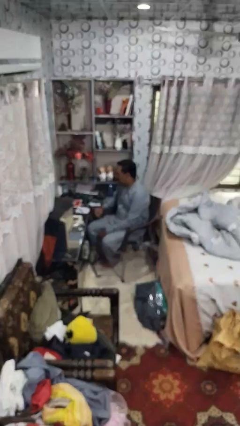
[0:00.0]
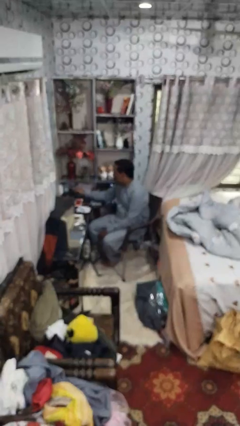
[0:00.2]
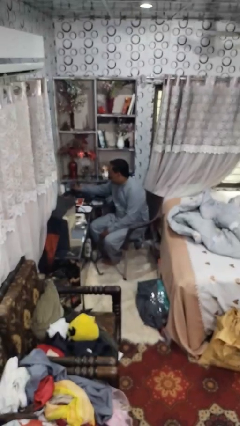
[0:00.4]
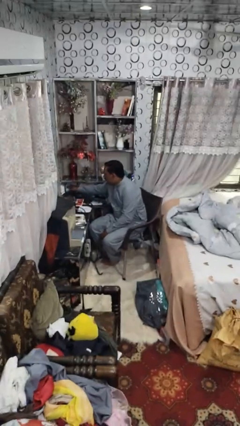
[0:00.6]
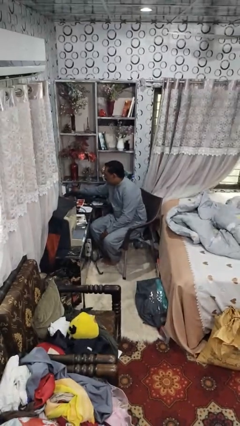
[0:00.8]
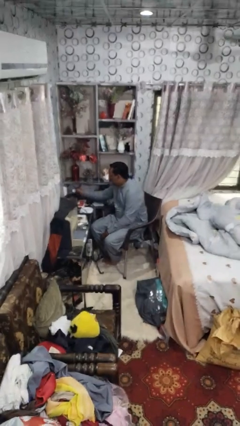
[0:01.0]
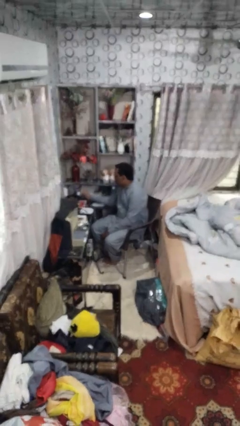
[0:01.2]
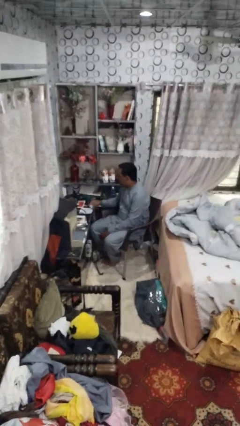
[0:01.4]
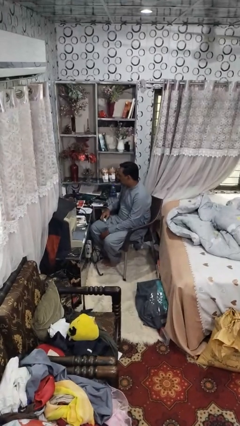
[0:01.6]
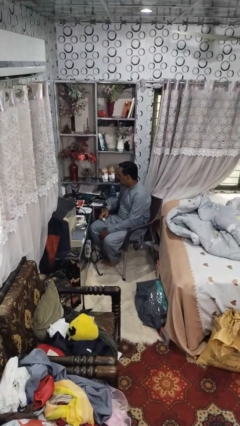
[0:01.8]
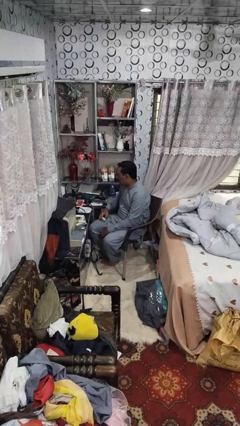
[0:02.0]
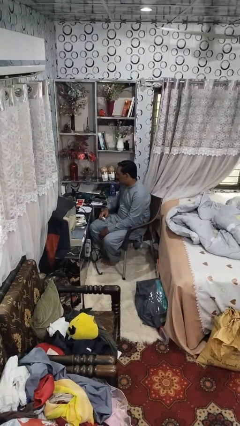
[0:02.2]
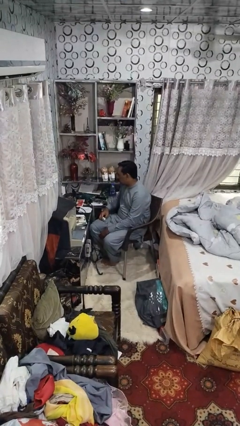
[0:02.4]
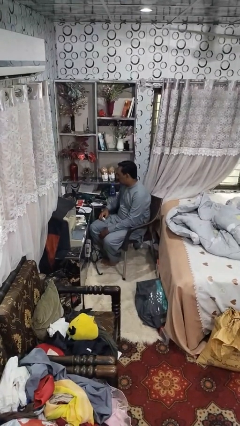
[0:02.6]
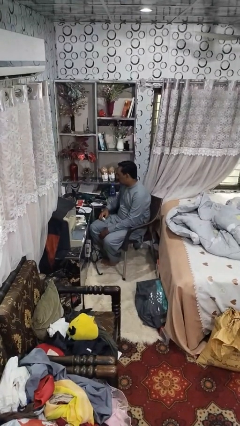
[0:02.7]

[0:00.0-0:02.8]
person unplugs from electrical socket

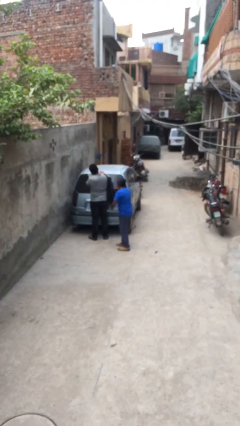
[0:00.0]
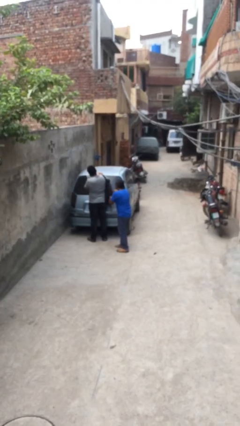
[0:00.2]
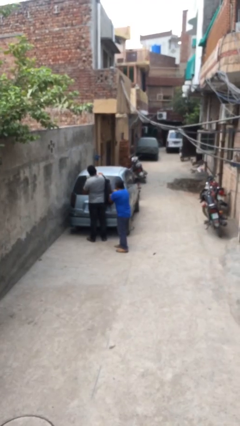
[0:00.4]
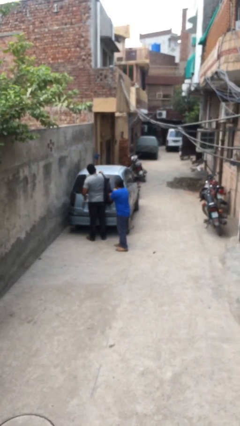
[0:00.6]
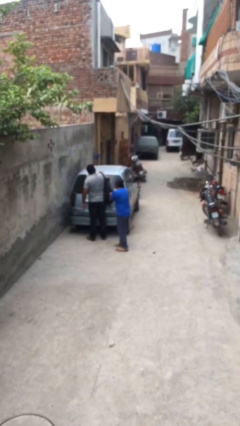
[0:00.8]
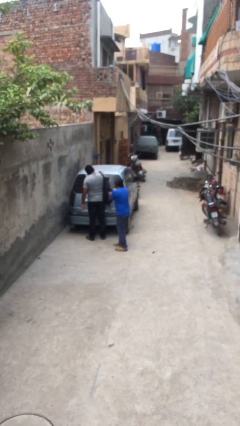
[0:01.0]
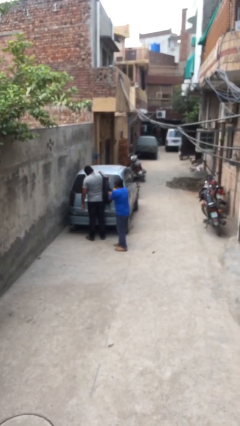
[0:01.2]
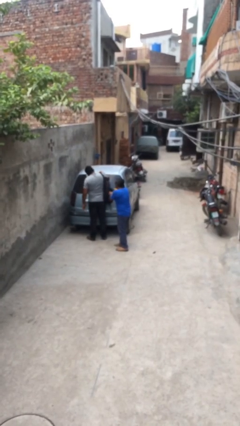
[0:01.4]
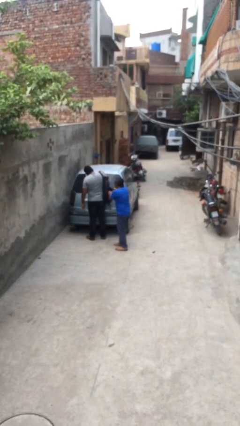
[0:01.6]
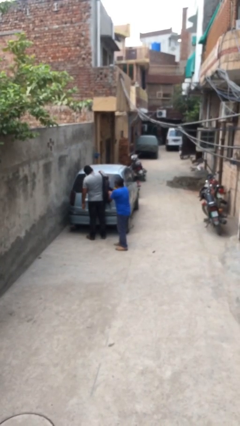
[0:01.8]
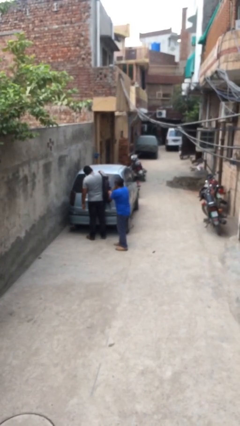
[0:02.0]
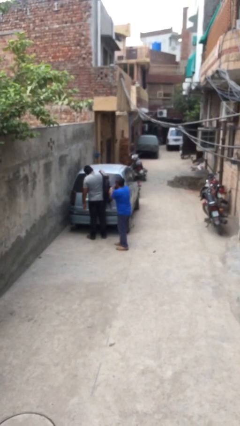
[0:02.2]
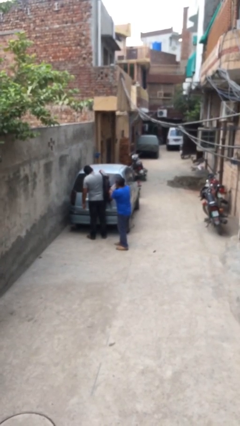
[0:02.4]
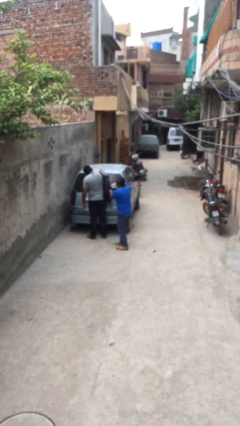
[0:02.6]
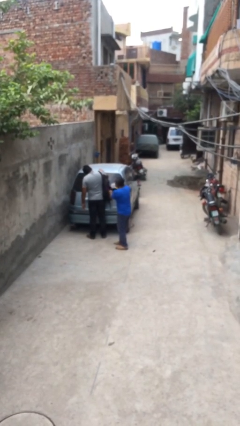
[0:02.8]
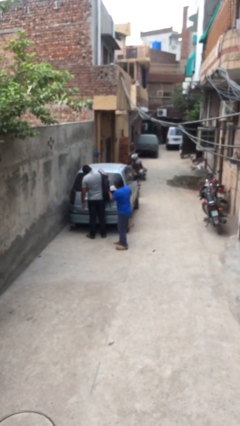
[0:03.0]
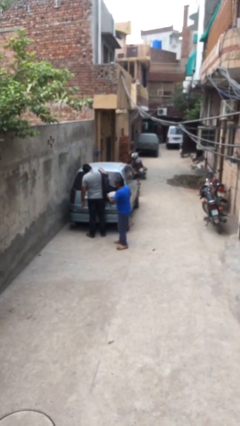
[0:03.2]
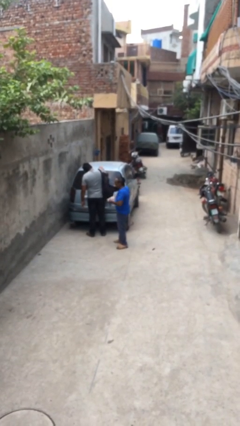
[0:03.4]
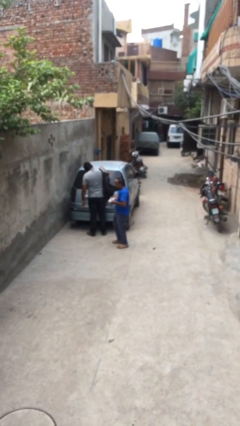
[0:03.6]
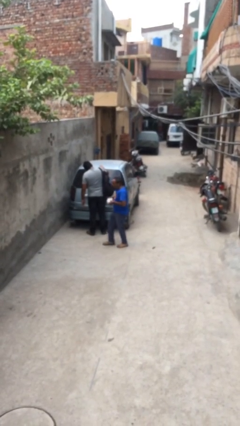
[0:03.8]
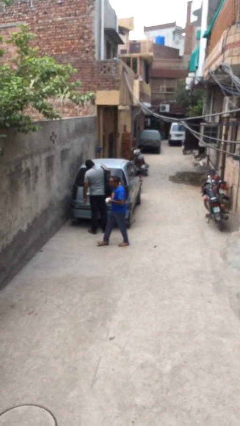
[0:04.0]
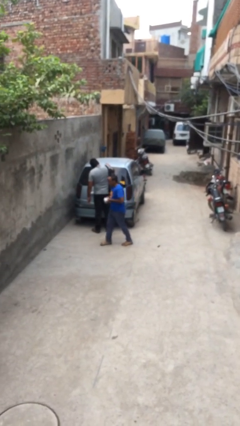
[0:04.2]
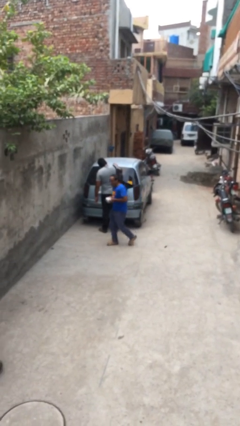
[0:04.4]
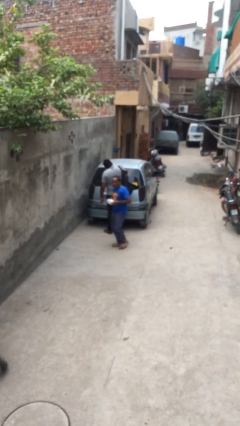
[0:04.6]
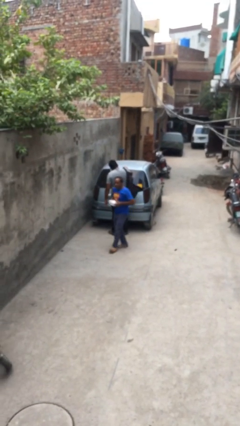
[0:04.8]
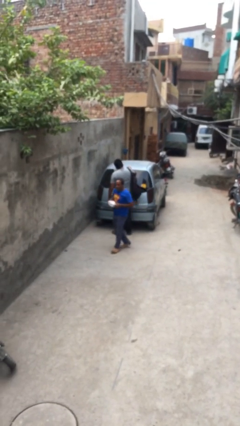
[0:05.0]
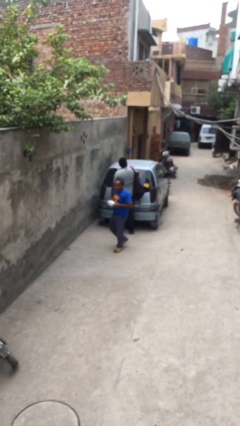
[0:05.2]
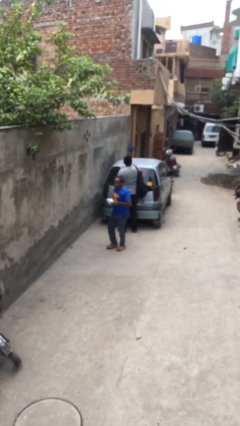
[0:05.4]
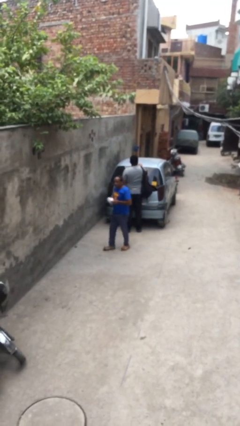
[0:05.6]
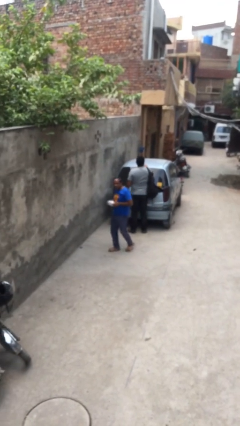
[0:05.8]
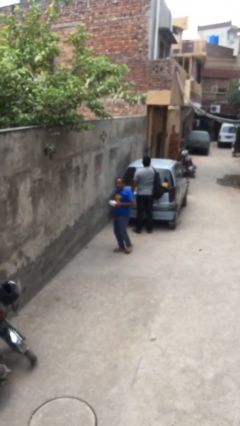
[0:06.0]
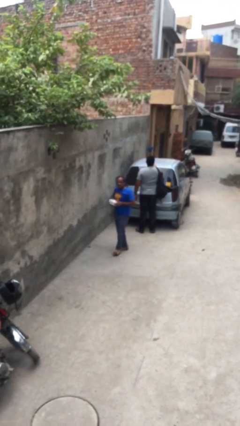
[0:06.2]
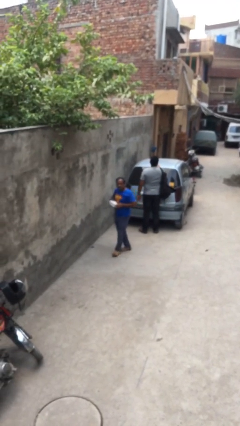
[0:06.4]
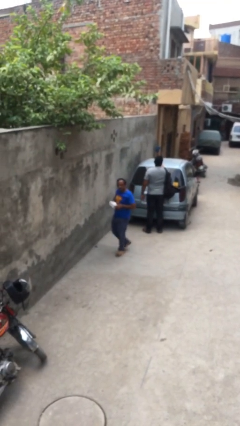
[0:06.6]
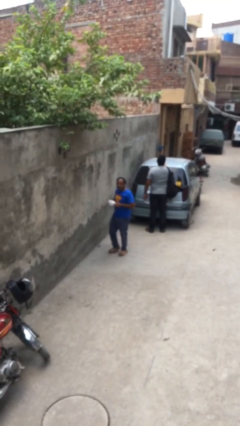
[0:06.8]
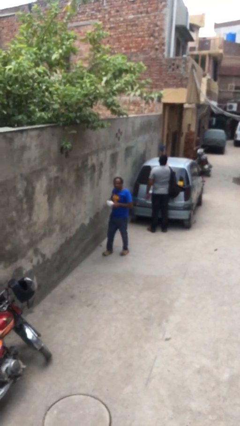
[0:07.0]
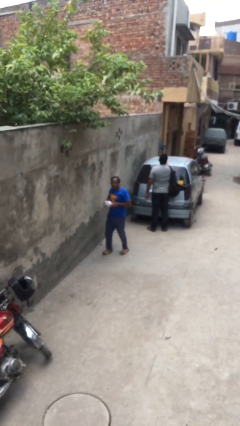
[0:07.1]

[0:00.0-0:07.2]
person steals object from person

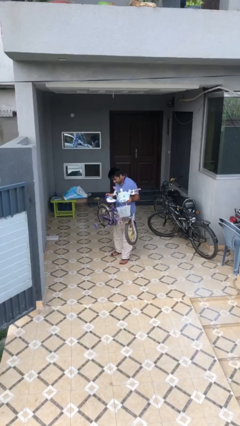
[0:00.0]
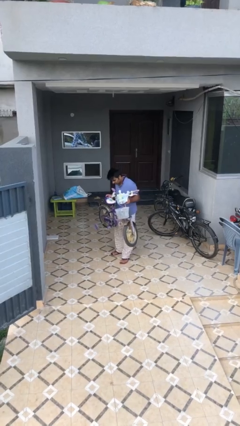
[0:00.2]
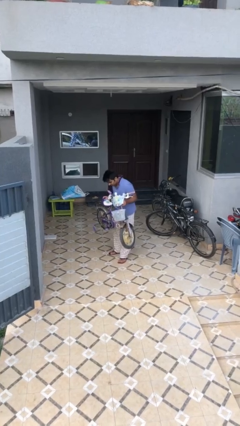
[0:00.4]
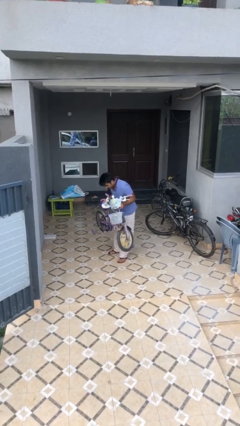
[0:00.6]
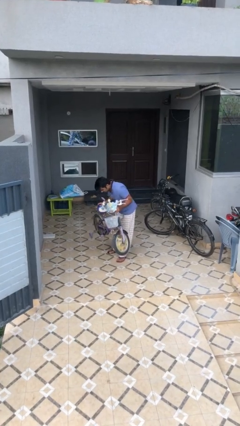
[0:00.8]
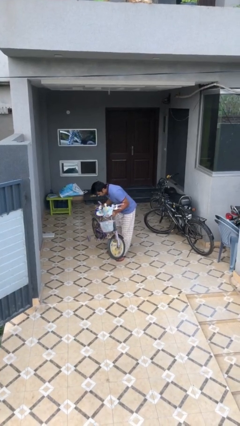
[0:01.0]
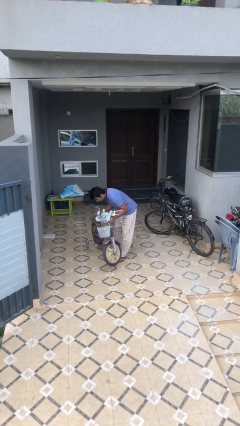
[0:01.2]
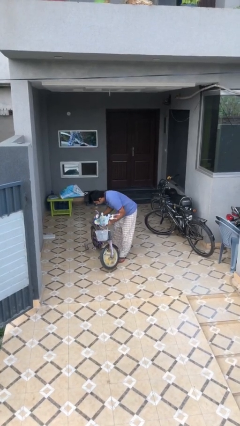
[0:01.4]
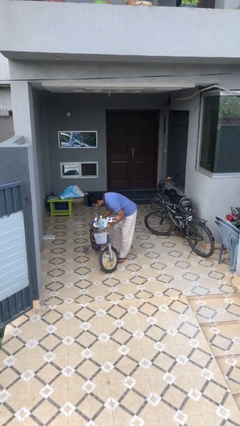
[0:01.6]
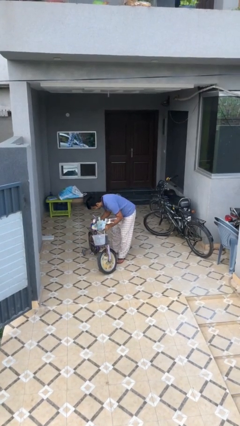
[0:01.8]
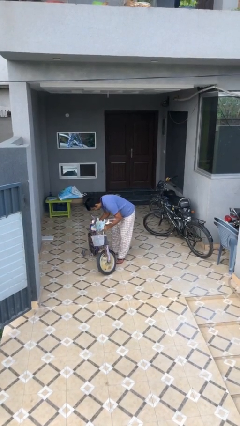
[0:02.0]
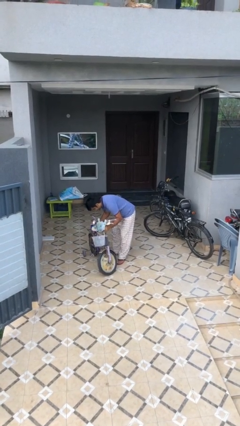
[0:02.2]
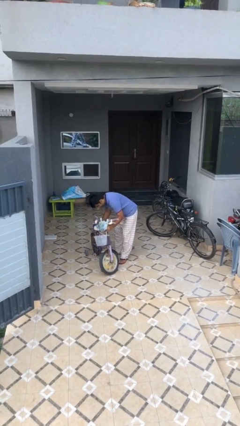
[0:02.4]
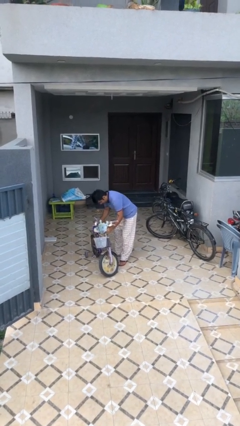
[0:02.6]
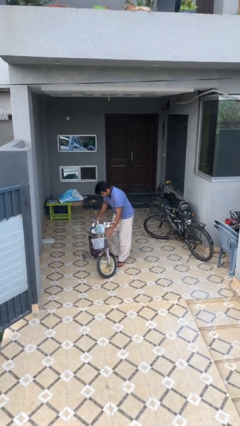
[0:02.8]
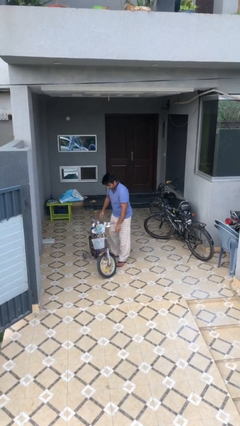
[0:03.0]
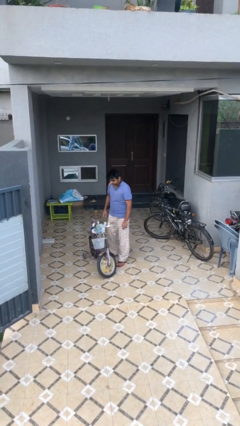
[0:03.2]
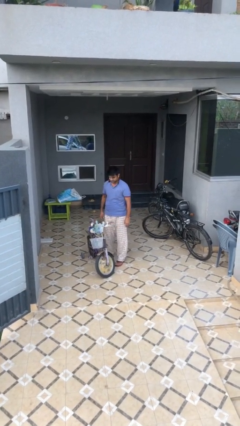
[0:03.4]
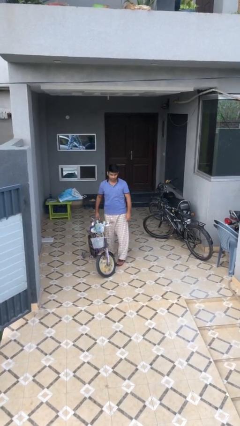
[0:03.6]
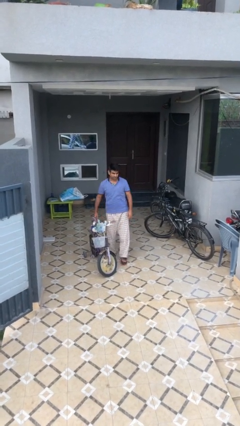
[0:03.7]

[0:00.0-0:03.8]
person puts down object on floor

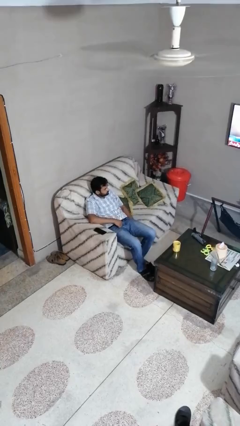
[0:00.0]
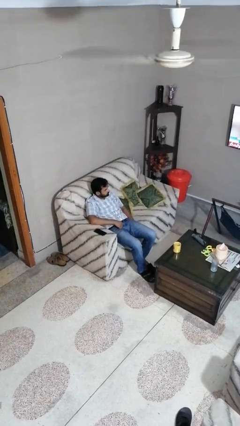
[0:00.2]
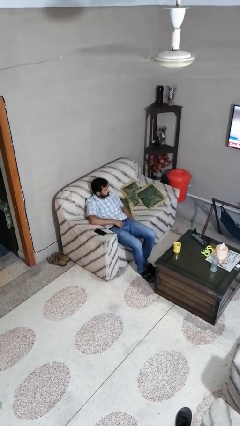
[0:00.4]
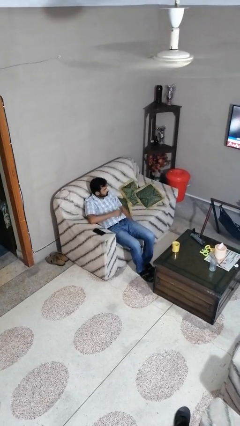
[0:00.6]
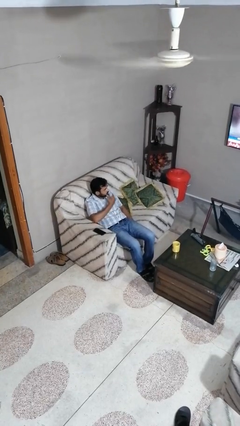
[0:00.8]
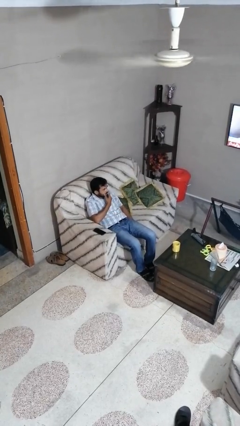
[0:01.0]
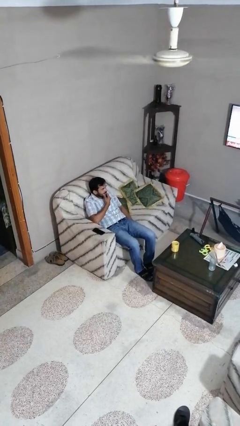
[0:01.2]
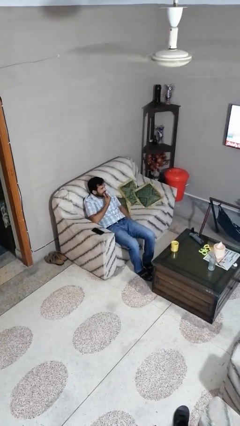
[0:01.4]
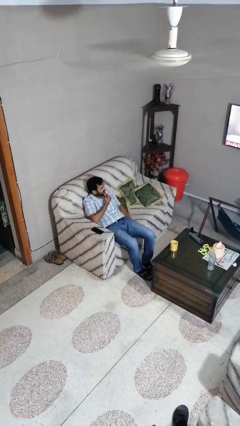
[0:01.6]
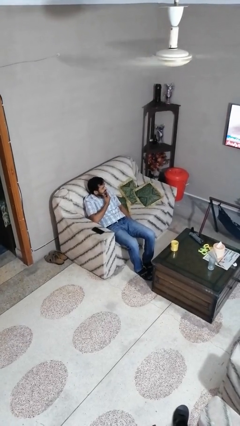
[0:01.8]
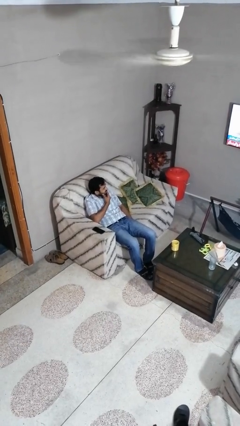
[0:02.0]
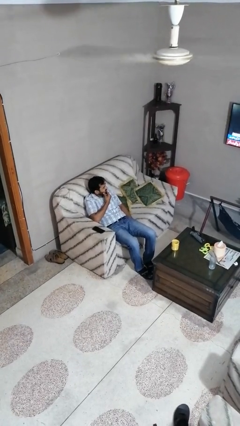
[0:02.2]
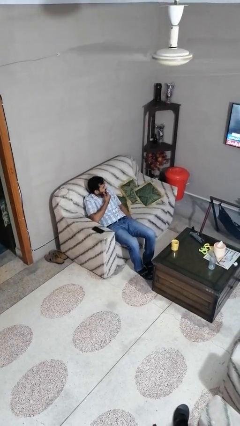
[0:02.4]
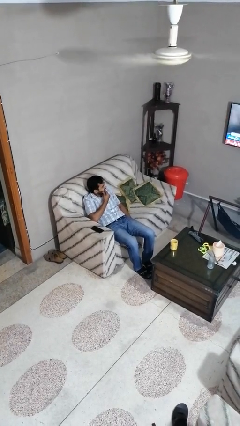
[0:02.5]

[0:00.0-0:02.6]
person strokes chin

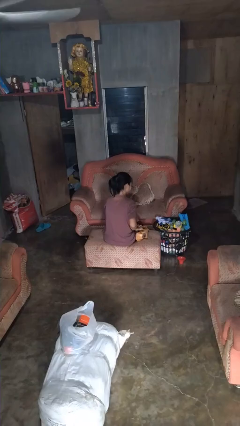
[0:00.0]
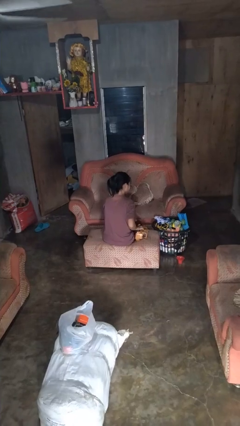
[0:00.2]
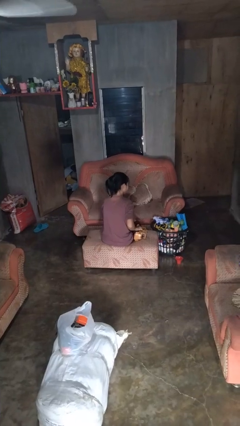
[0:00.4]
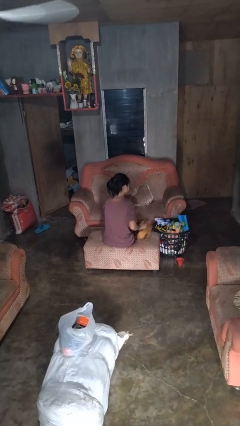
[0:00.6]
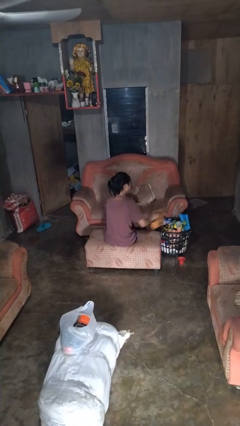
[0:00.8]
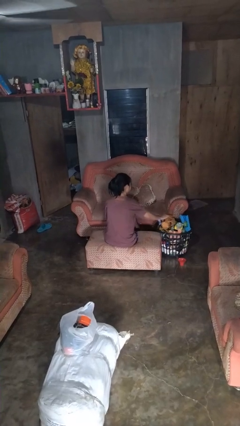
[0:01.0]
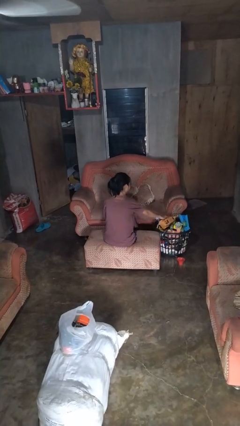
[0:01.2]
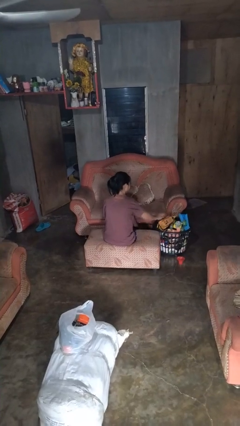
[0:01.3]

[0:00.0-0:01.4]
person puts object into basket
